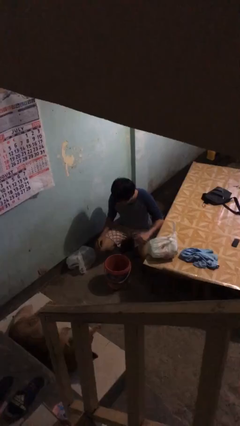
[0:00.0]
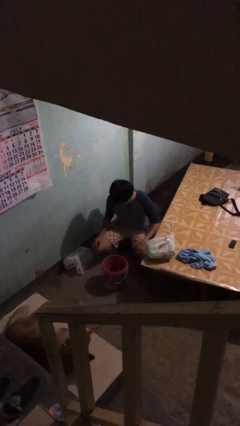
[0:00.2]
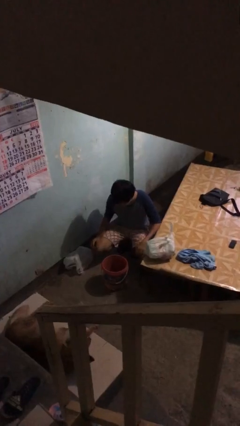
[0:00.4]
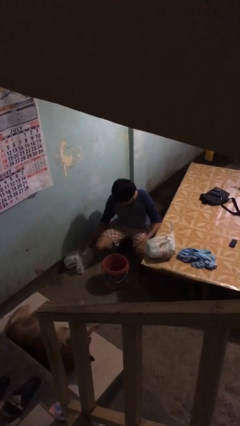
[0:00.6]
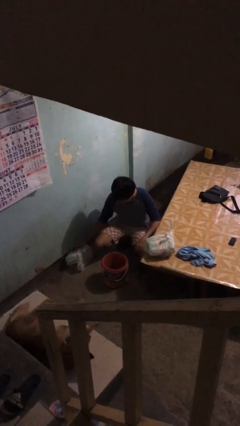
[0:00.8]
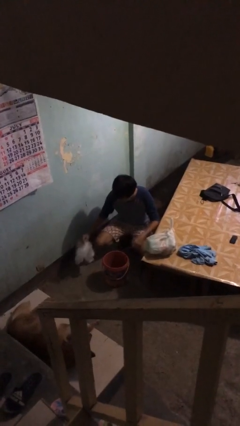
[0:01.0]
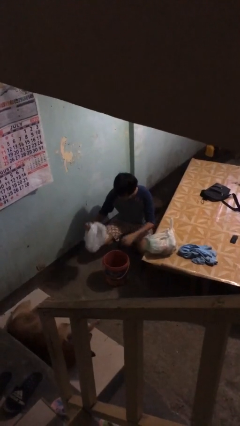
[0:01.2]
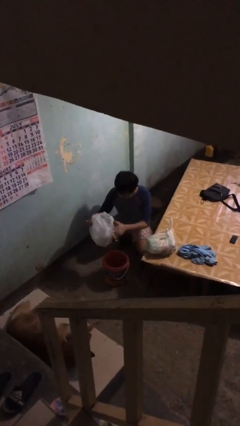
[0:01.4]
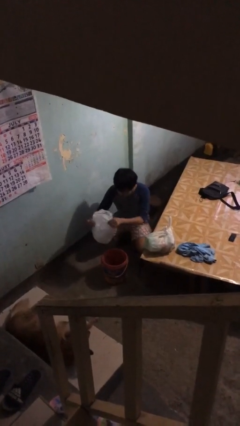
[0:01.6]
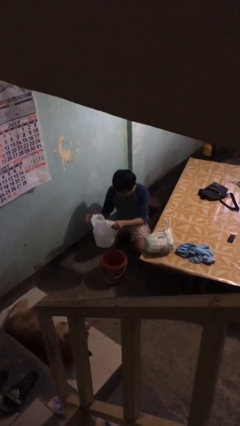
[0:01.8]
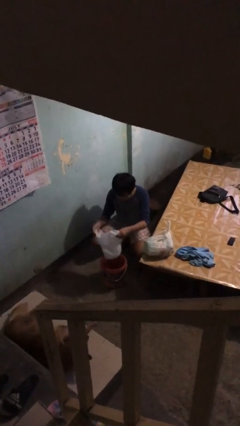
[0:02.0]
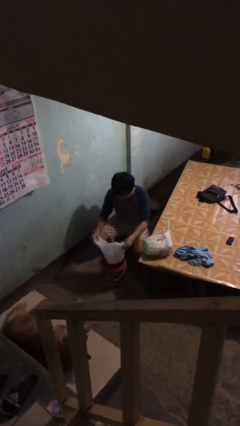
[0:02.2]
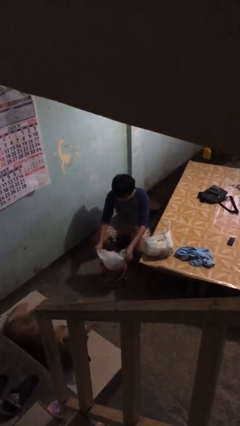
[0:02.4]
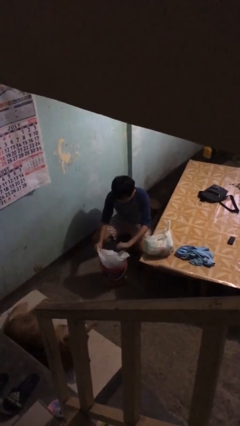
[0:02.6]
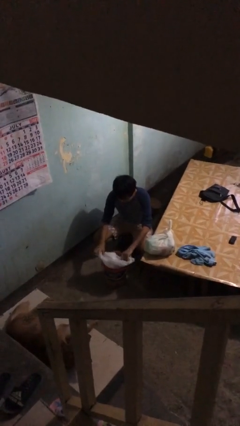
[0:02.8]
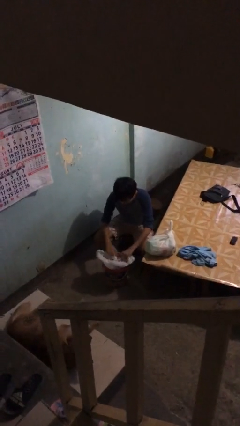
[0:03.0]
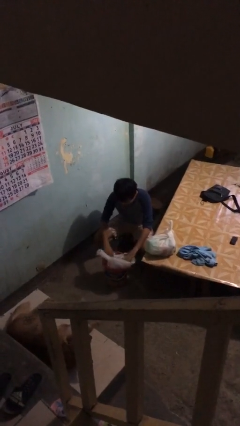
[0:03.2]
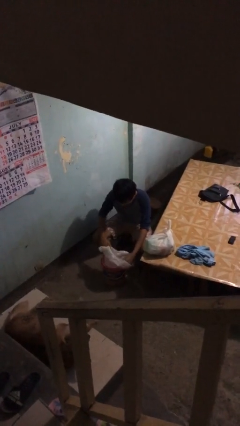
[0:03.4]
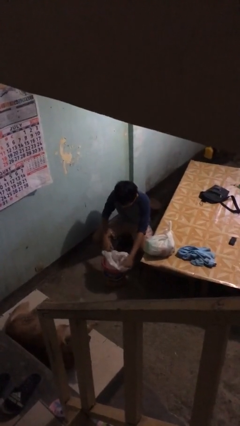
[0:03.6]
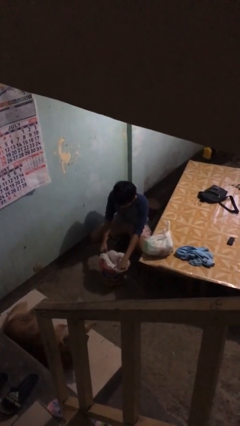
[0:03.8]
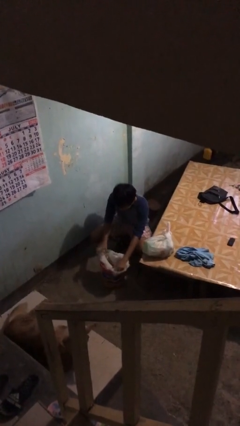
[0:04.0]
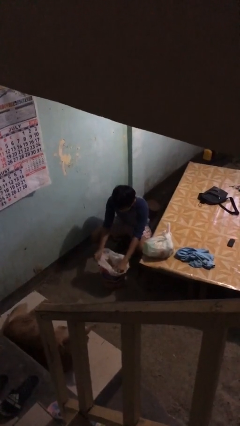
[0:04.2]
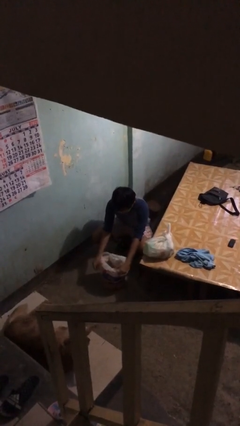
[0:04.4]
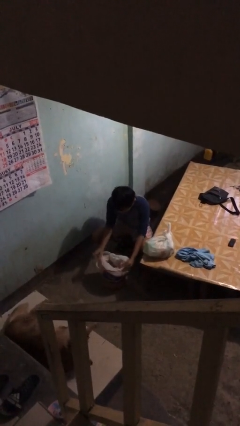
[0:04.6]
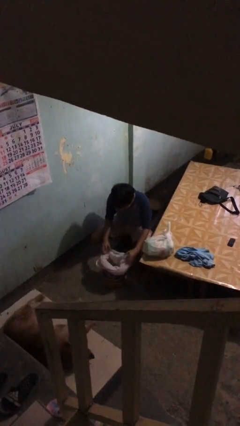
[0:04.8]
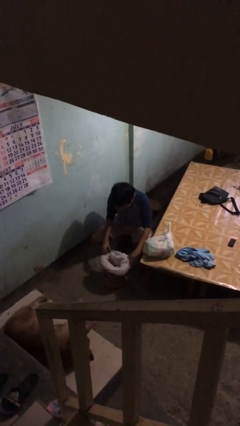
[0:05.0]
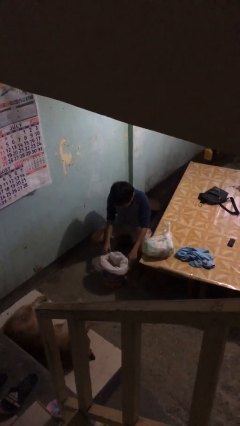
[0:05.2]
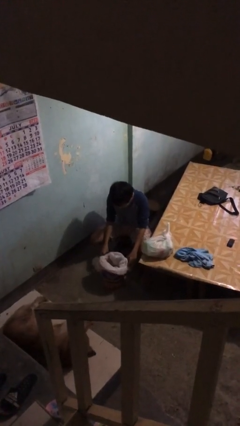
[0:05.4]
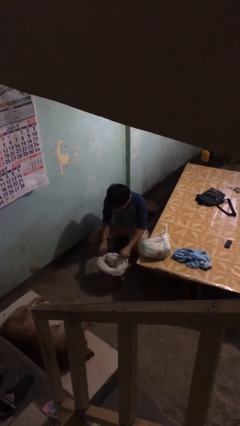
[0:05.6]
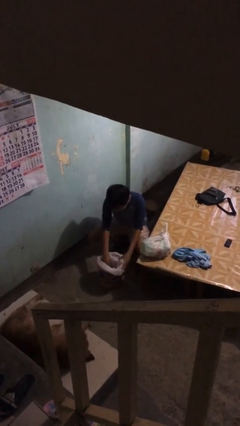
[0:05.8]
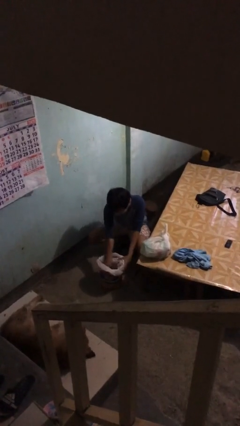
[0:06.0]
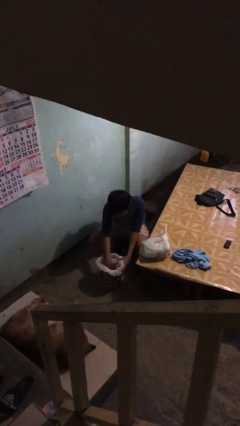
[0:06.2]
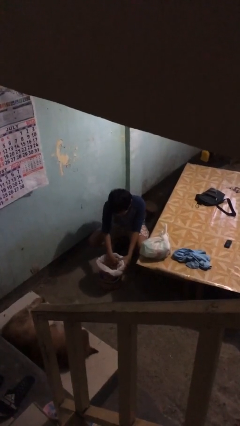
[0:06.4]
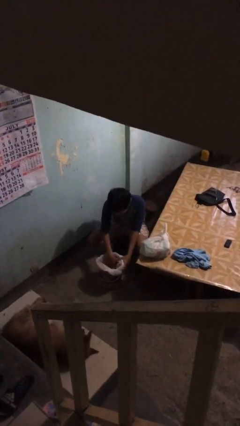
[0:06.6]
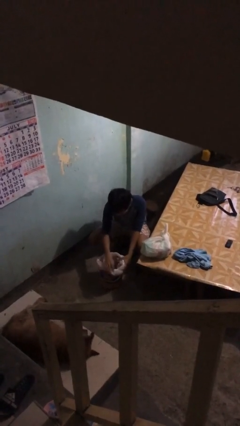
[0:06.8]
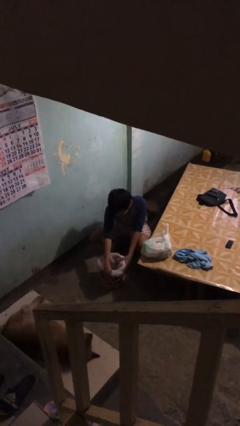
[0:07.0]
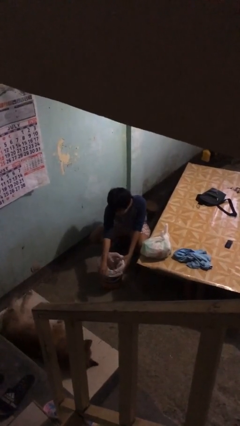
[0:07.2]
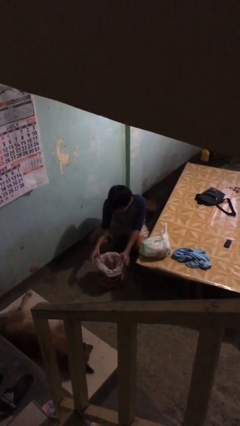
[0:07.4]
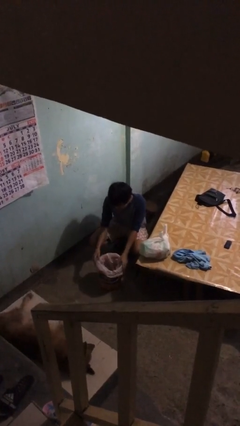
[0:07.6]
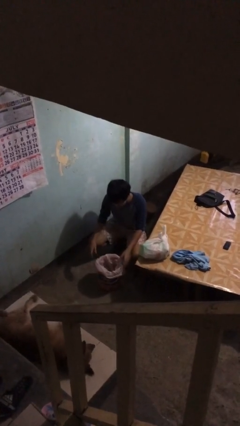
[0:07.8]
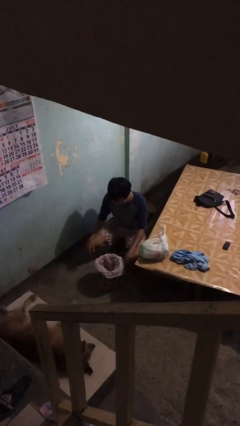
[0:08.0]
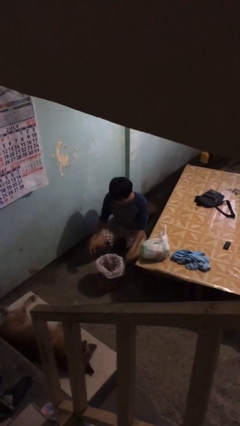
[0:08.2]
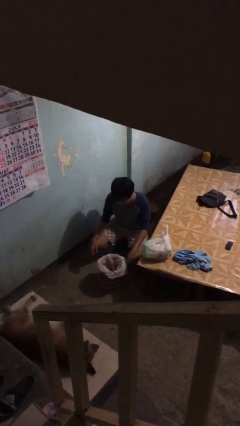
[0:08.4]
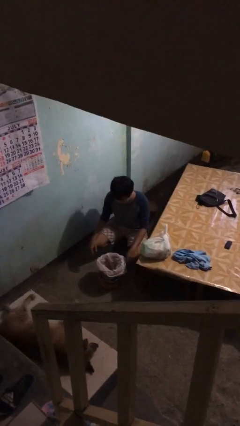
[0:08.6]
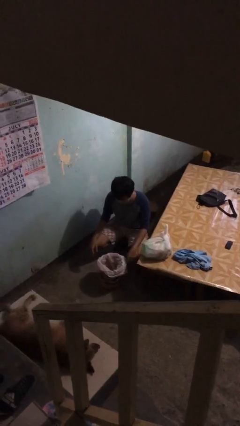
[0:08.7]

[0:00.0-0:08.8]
person inserts trashbag into trashcan

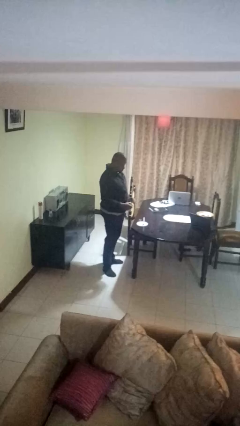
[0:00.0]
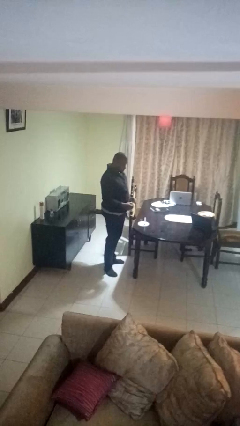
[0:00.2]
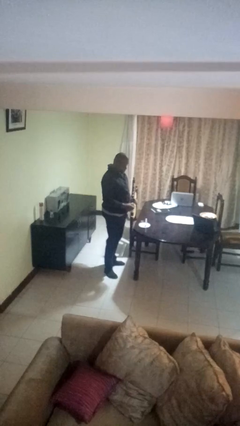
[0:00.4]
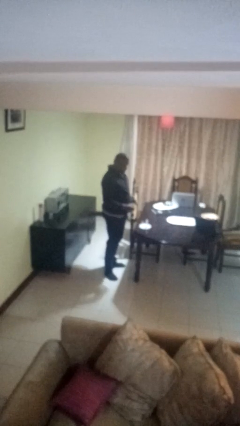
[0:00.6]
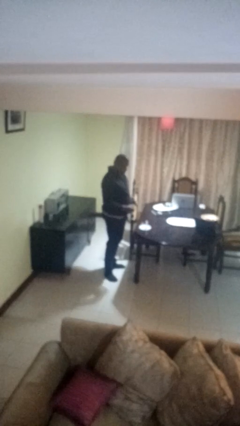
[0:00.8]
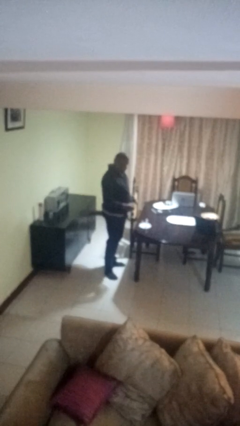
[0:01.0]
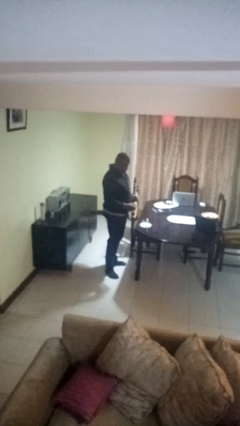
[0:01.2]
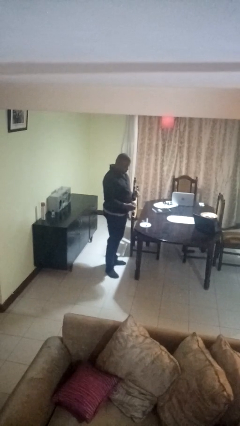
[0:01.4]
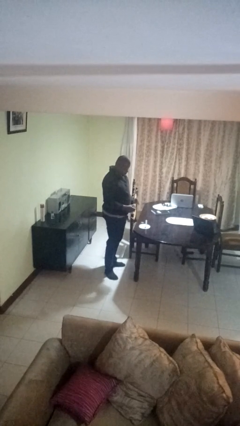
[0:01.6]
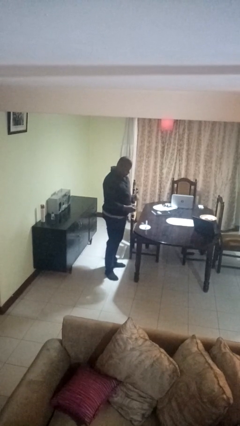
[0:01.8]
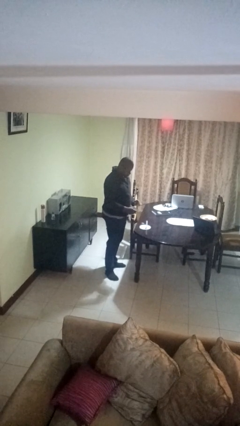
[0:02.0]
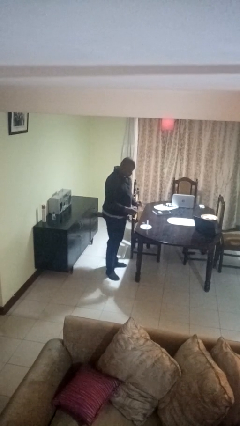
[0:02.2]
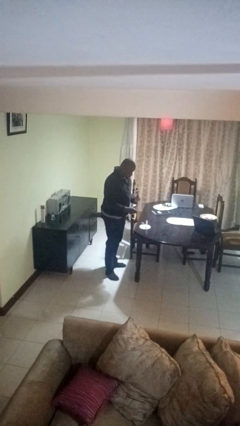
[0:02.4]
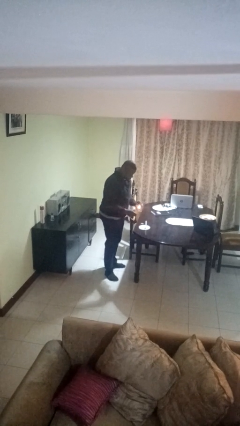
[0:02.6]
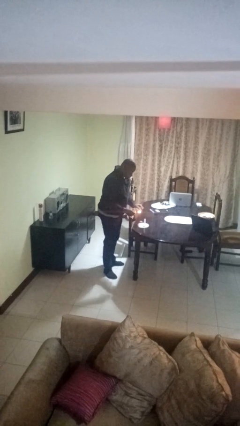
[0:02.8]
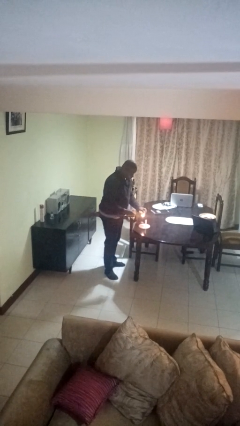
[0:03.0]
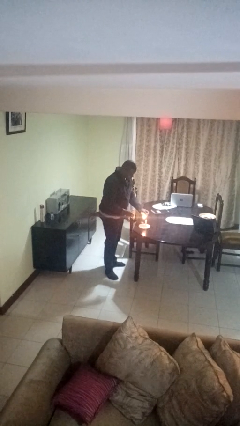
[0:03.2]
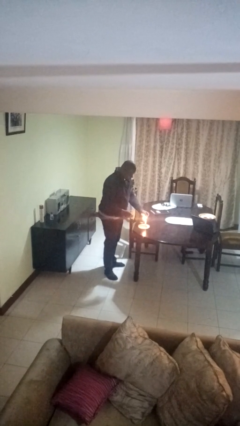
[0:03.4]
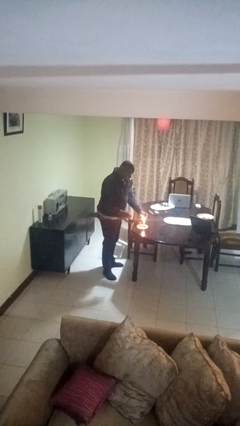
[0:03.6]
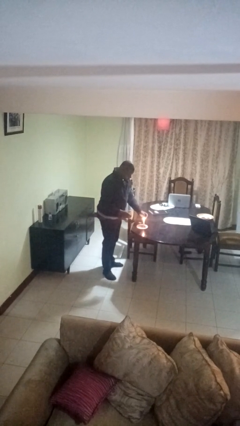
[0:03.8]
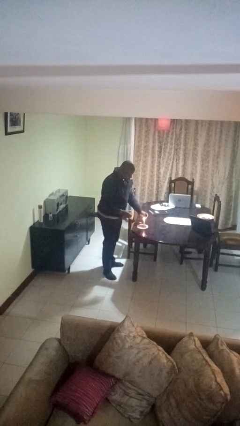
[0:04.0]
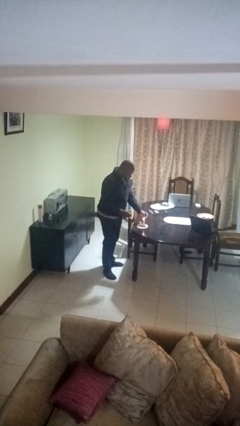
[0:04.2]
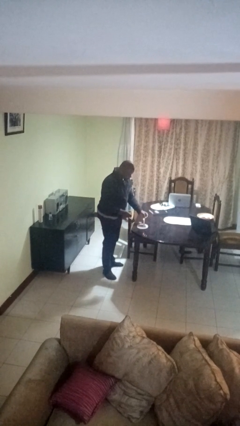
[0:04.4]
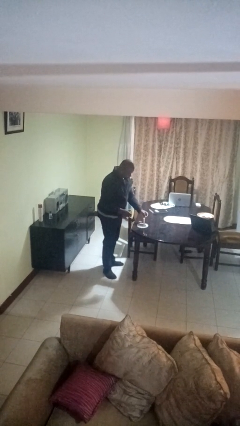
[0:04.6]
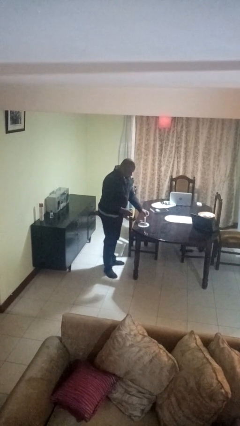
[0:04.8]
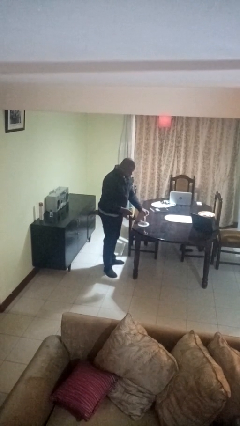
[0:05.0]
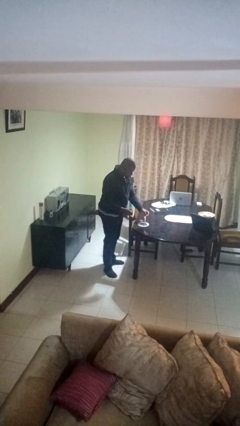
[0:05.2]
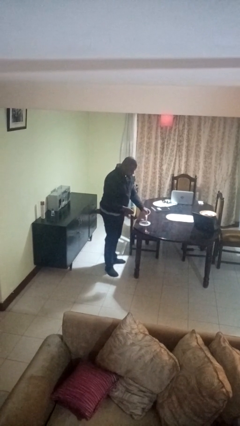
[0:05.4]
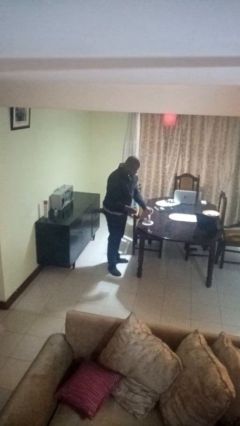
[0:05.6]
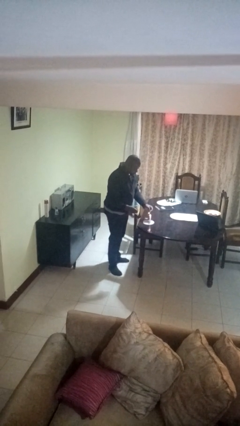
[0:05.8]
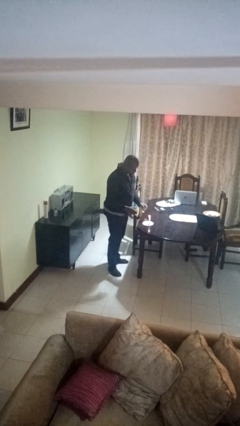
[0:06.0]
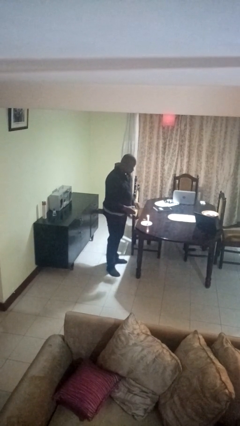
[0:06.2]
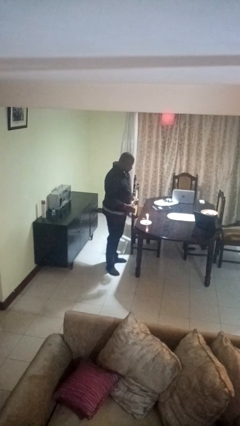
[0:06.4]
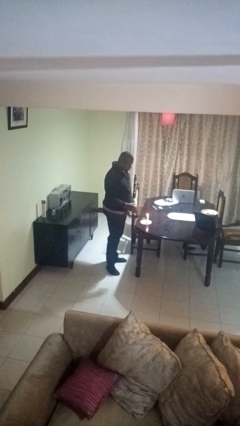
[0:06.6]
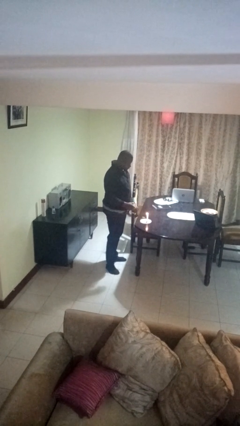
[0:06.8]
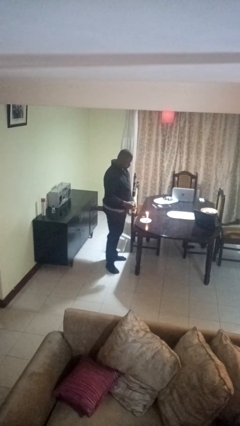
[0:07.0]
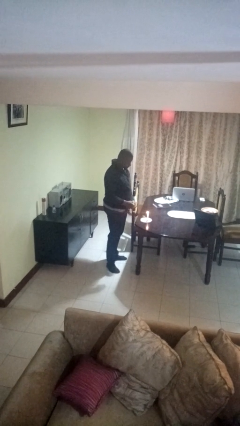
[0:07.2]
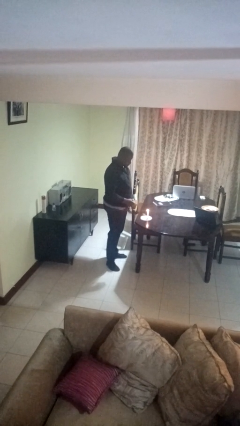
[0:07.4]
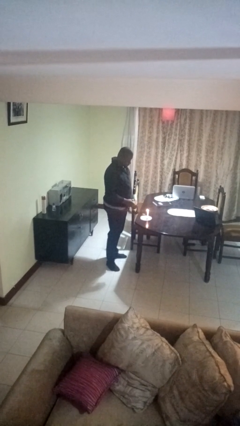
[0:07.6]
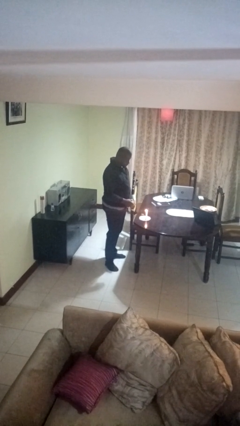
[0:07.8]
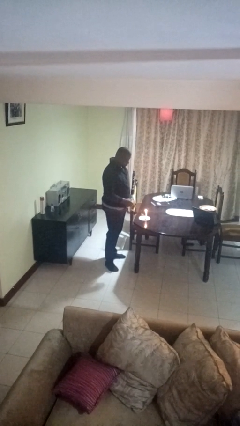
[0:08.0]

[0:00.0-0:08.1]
person lights candle

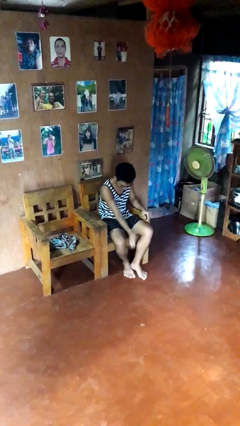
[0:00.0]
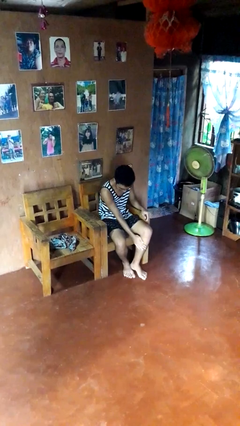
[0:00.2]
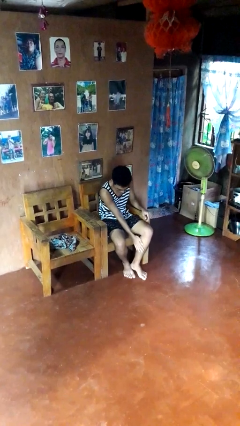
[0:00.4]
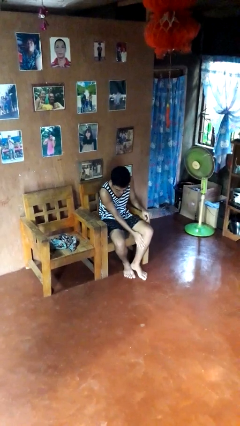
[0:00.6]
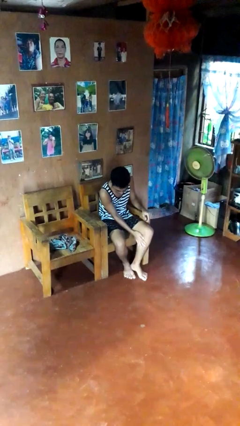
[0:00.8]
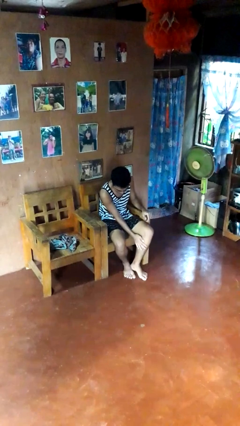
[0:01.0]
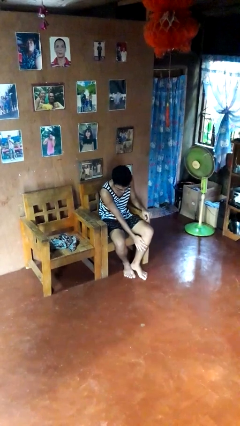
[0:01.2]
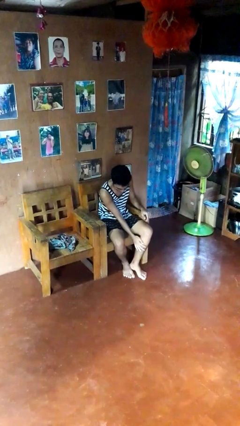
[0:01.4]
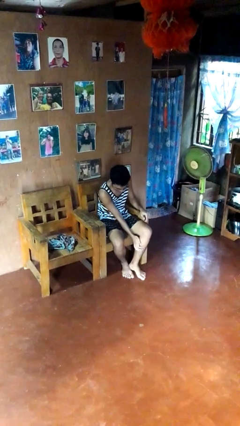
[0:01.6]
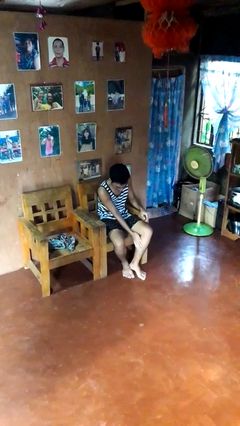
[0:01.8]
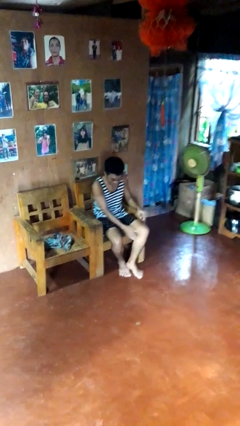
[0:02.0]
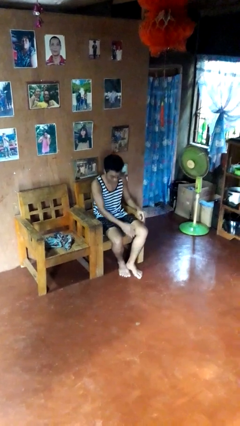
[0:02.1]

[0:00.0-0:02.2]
person swats bug
